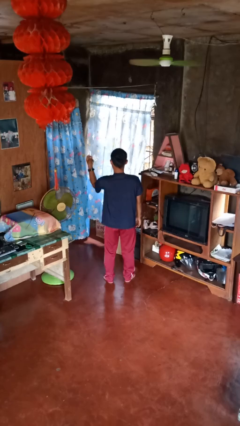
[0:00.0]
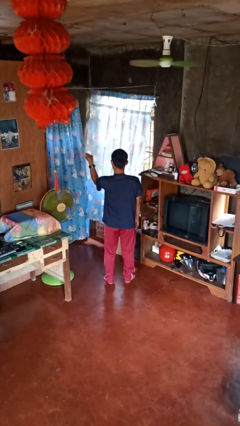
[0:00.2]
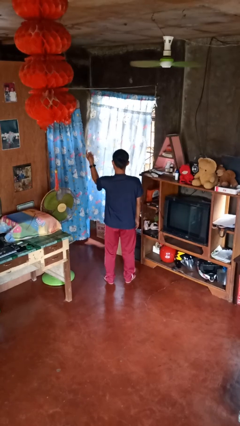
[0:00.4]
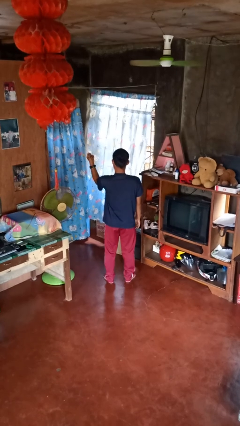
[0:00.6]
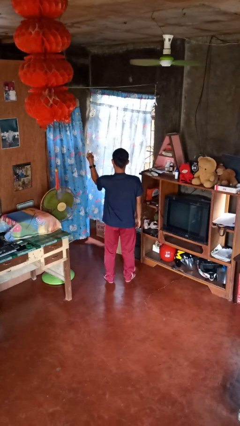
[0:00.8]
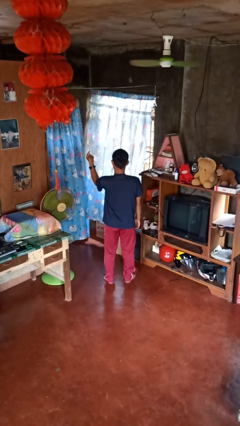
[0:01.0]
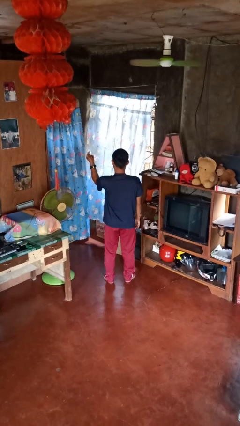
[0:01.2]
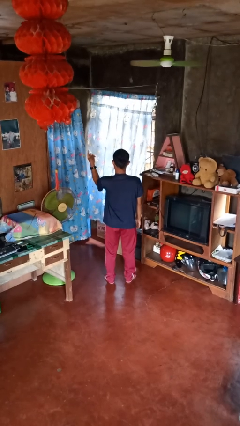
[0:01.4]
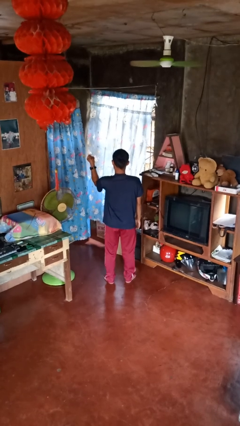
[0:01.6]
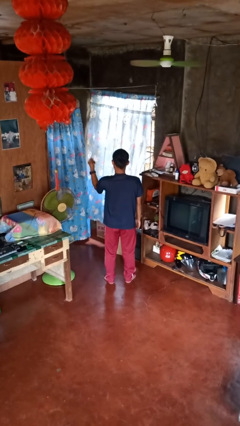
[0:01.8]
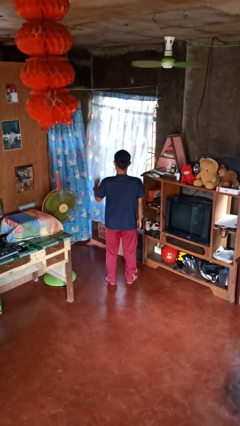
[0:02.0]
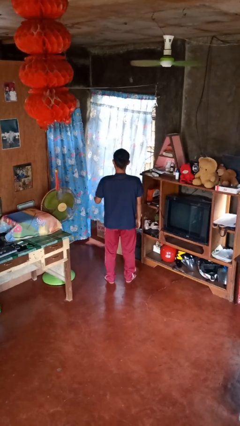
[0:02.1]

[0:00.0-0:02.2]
person snaps fingers

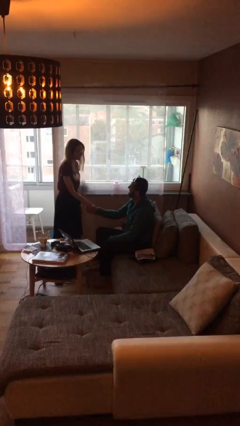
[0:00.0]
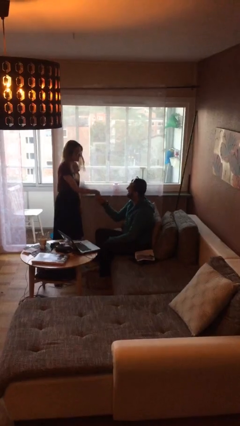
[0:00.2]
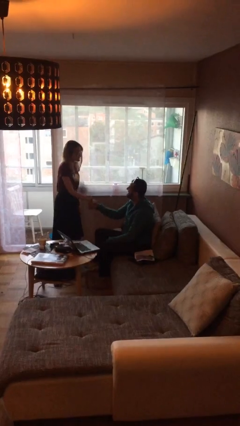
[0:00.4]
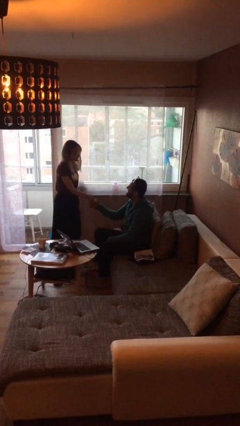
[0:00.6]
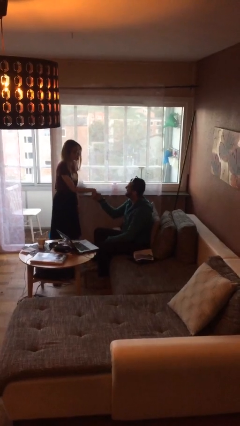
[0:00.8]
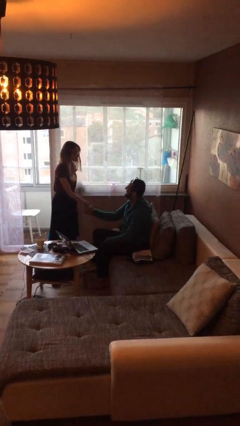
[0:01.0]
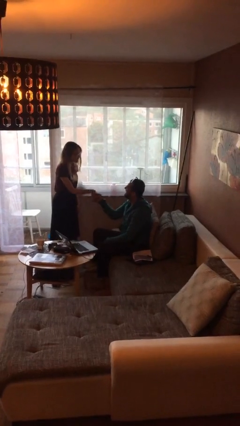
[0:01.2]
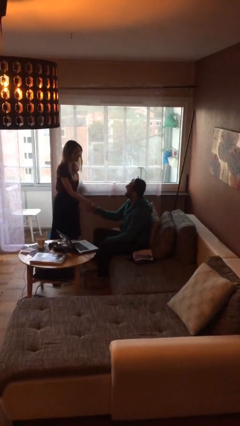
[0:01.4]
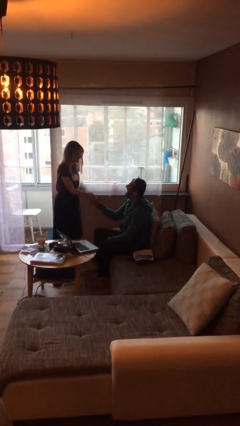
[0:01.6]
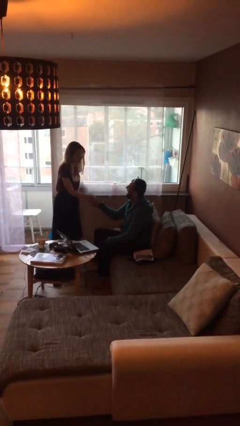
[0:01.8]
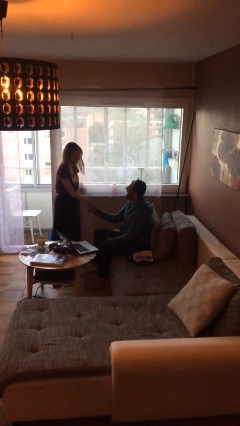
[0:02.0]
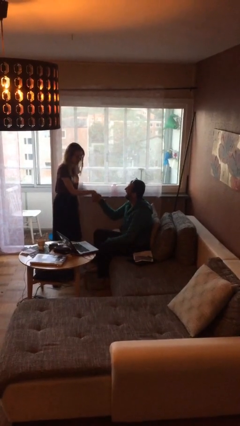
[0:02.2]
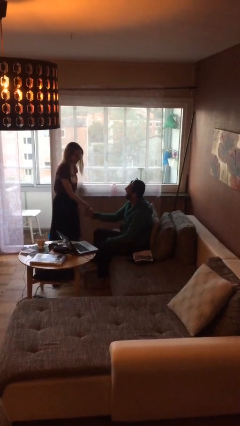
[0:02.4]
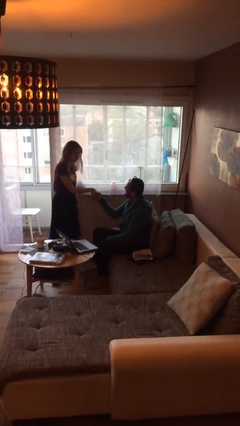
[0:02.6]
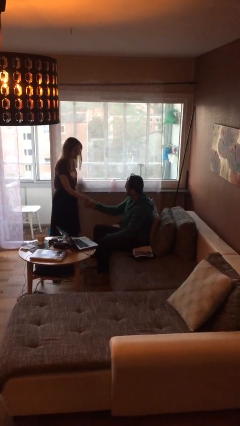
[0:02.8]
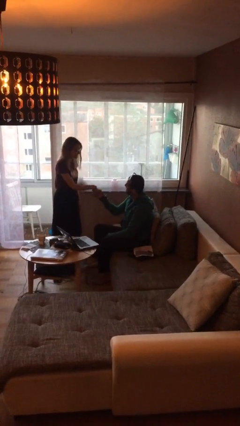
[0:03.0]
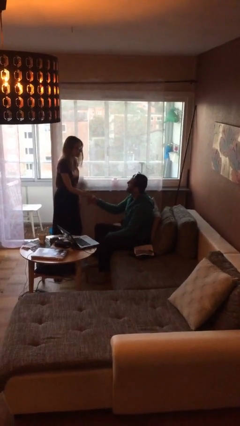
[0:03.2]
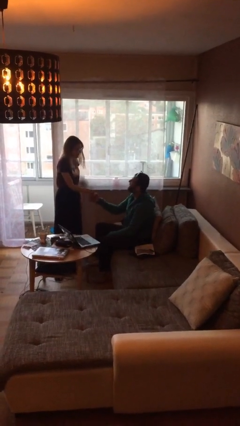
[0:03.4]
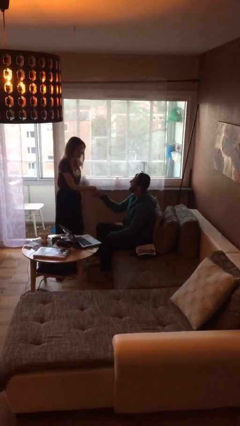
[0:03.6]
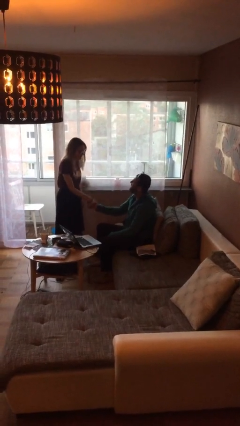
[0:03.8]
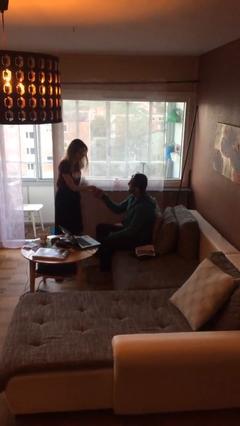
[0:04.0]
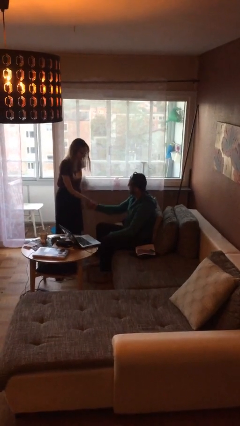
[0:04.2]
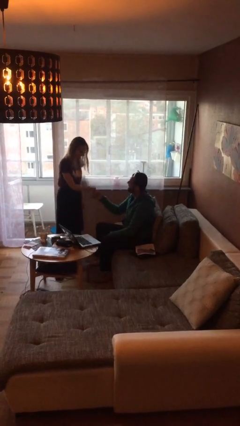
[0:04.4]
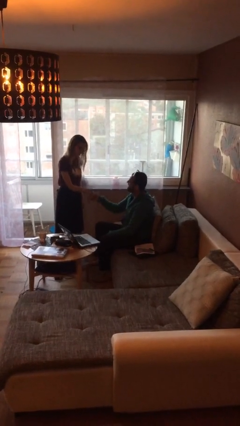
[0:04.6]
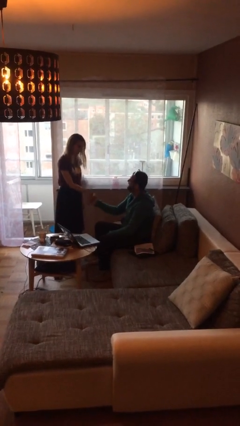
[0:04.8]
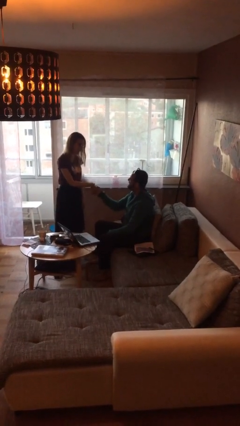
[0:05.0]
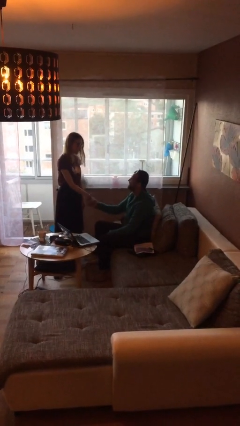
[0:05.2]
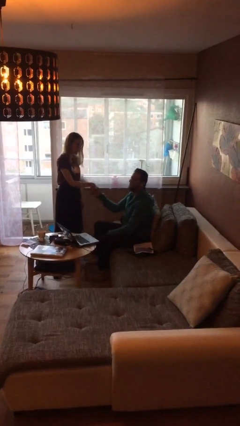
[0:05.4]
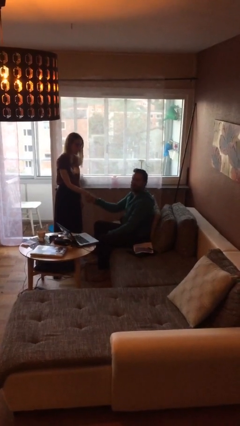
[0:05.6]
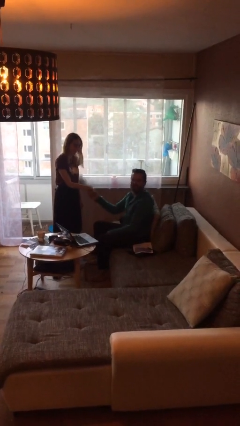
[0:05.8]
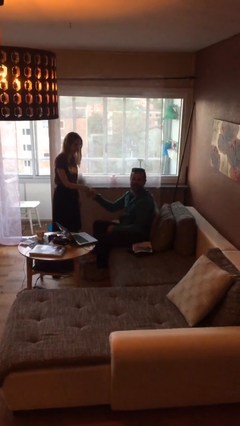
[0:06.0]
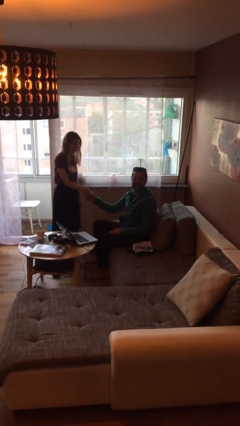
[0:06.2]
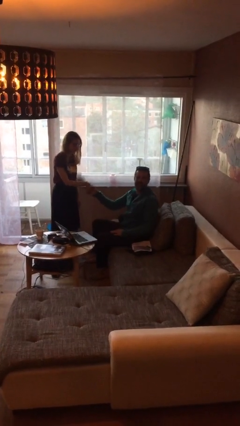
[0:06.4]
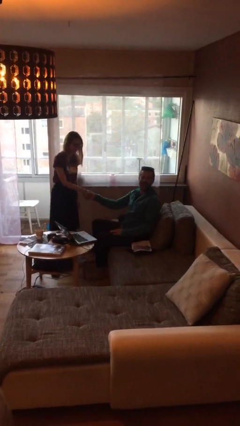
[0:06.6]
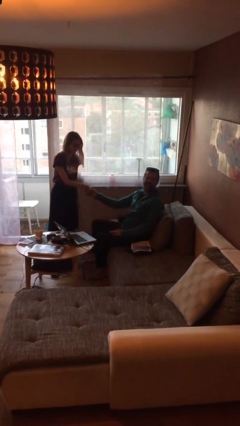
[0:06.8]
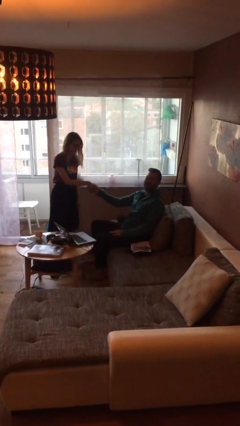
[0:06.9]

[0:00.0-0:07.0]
person shakes hand

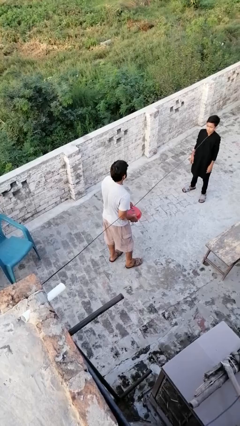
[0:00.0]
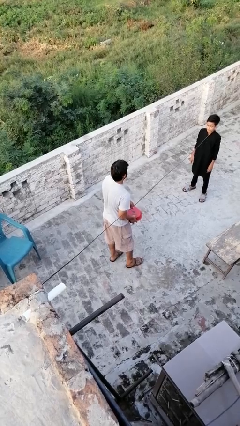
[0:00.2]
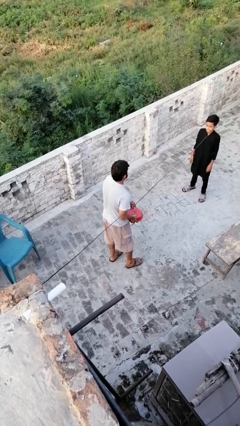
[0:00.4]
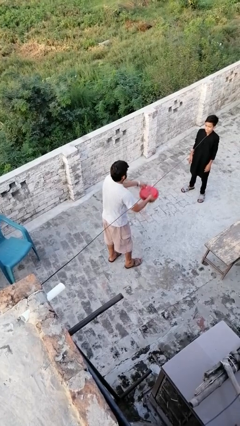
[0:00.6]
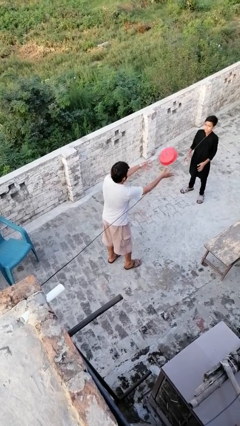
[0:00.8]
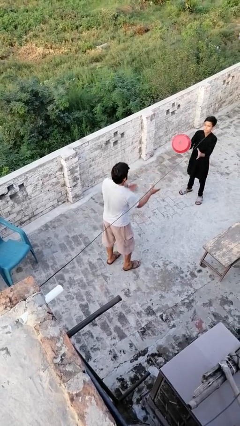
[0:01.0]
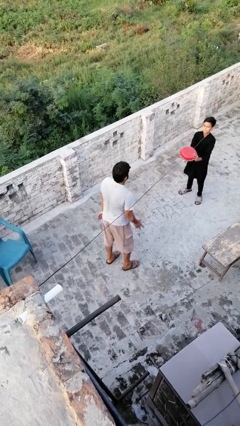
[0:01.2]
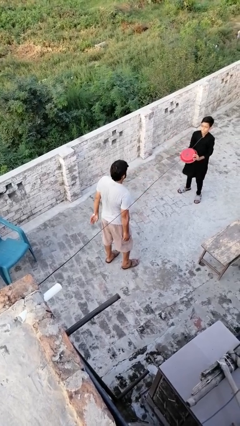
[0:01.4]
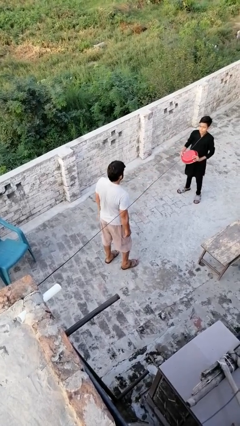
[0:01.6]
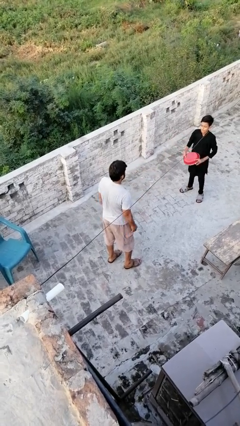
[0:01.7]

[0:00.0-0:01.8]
person throws object to person

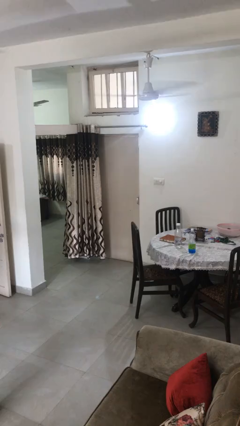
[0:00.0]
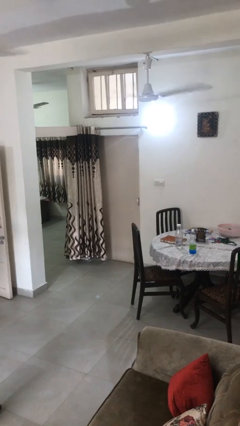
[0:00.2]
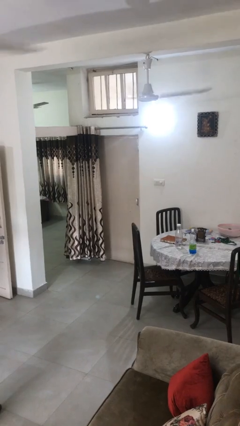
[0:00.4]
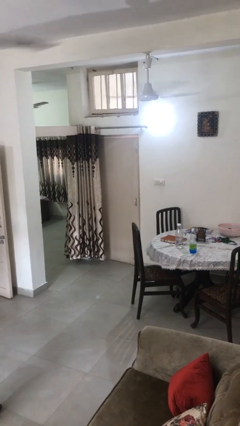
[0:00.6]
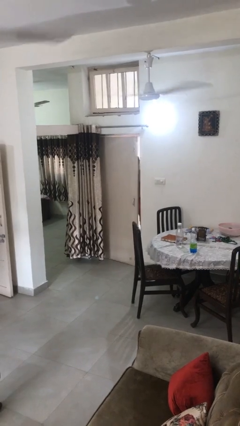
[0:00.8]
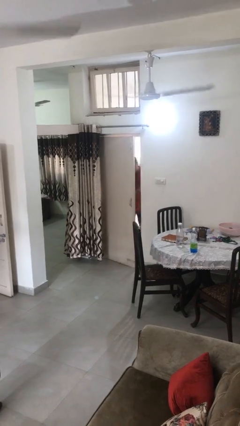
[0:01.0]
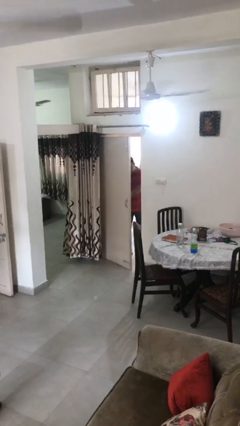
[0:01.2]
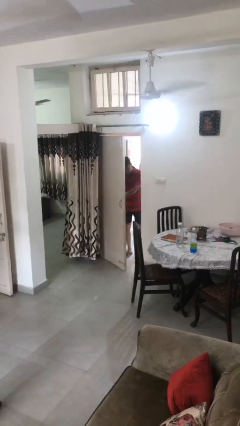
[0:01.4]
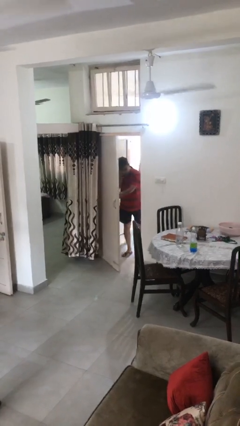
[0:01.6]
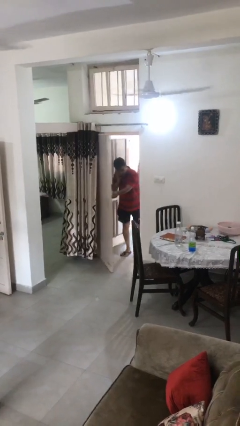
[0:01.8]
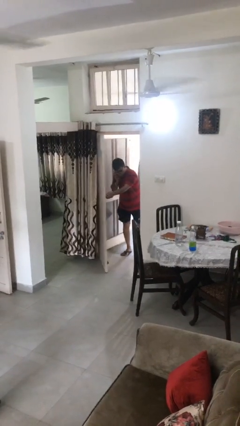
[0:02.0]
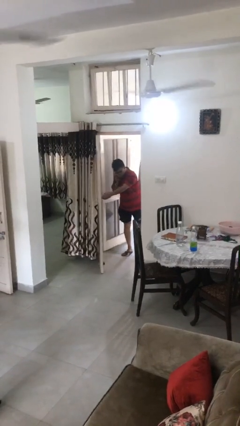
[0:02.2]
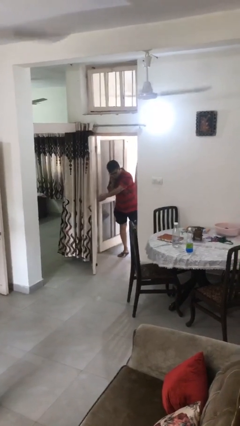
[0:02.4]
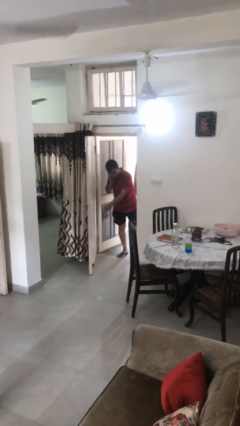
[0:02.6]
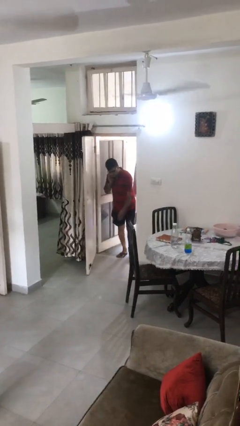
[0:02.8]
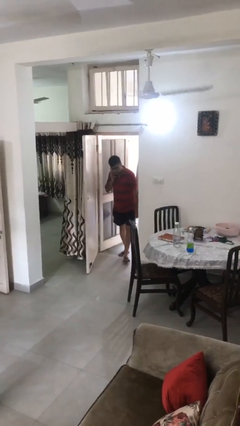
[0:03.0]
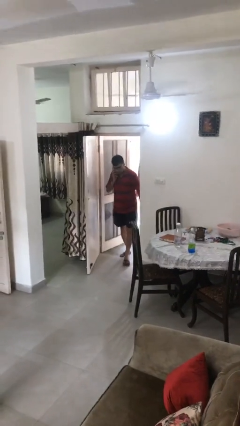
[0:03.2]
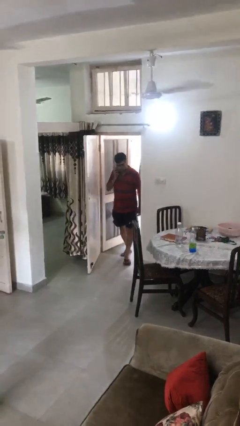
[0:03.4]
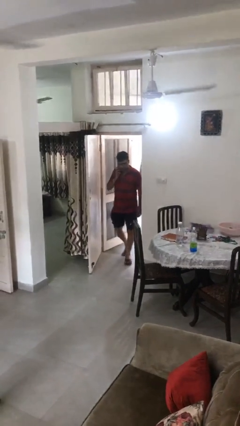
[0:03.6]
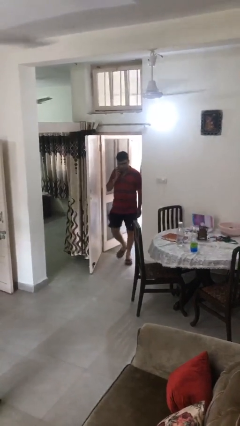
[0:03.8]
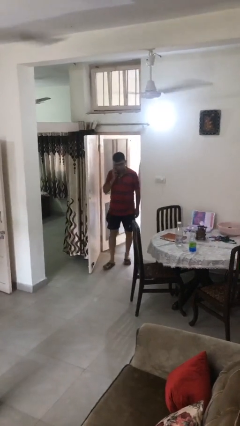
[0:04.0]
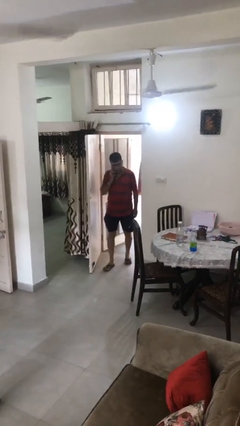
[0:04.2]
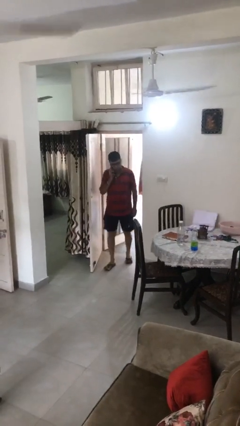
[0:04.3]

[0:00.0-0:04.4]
person opens facility door

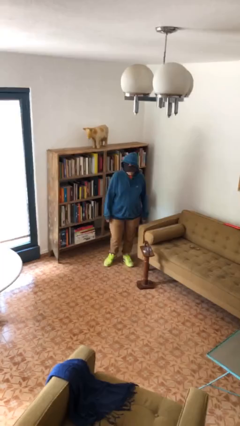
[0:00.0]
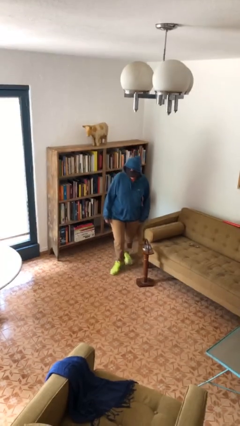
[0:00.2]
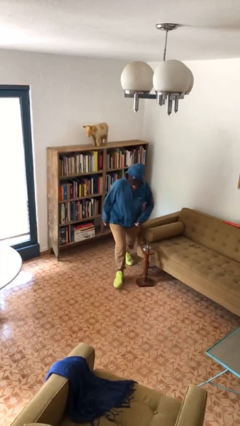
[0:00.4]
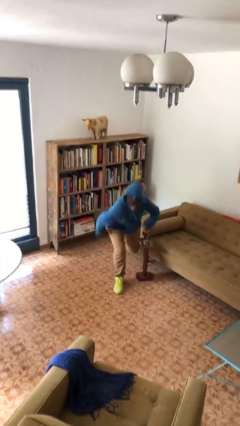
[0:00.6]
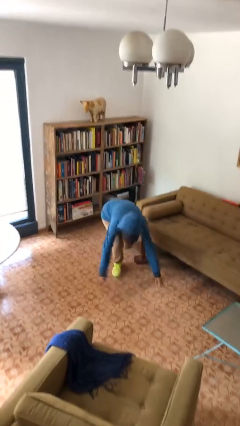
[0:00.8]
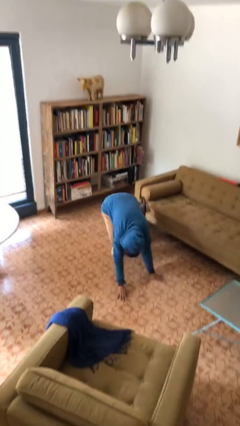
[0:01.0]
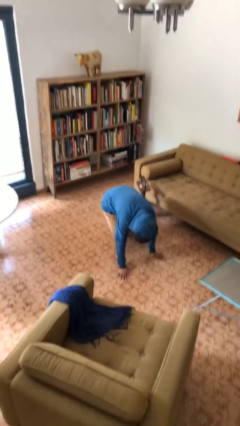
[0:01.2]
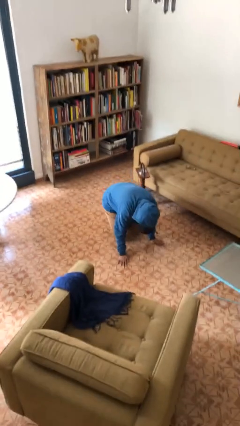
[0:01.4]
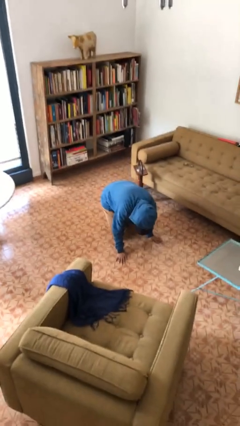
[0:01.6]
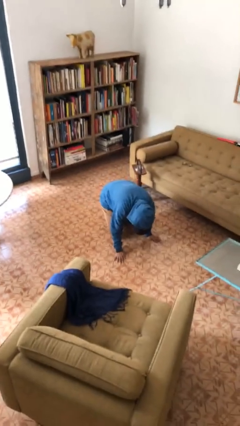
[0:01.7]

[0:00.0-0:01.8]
person trips on object on floor
